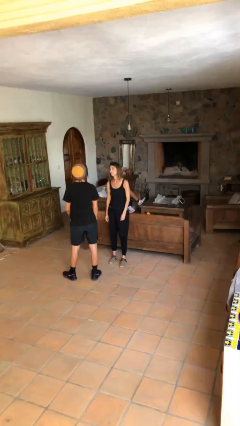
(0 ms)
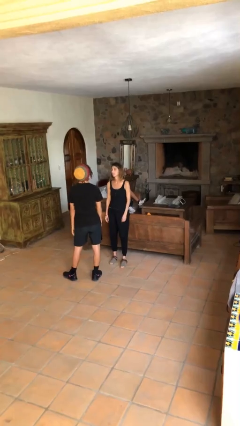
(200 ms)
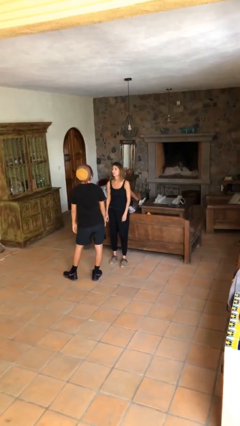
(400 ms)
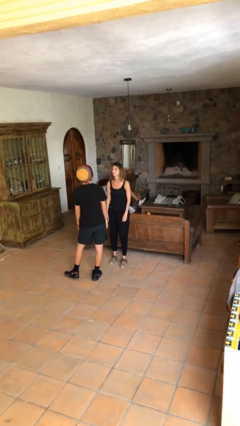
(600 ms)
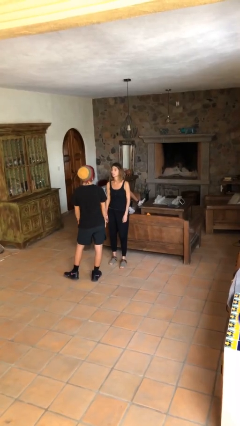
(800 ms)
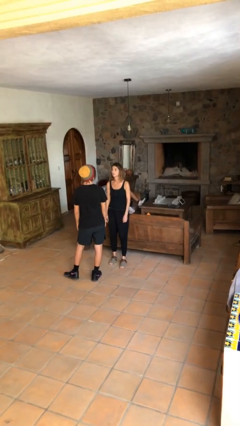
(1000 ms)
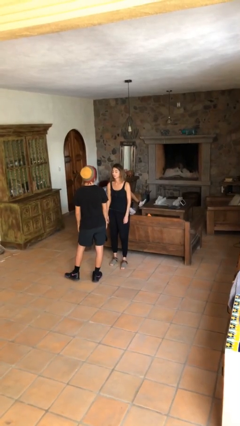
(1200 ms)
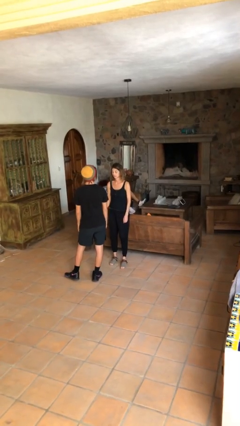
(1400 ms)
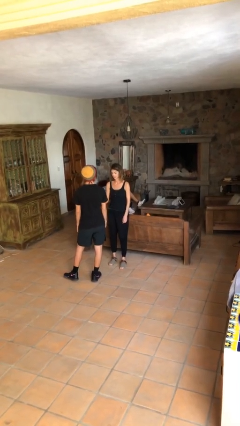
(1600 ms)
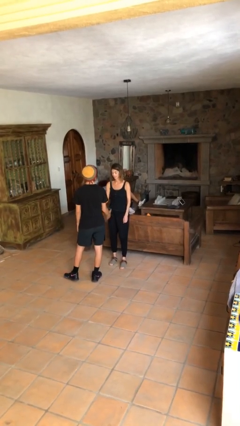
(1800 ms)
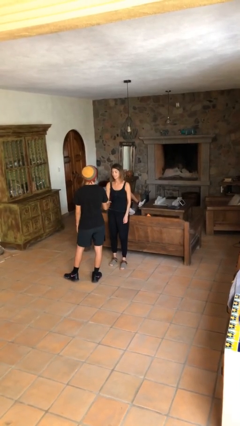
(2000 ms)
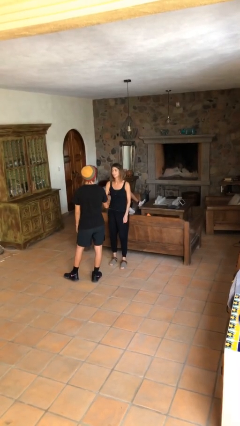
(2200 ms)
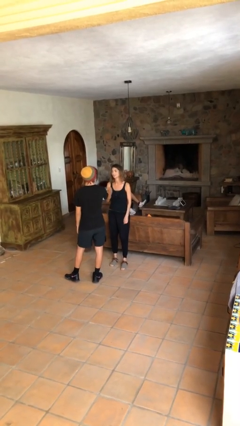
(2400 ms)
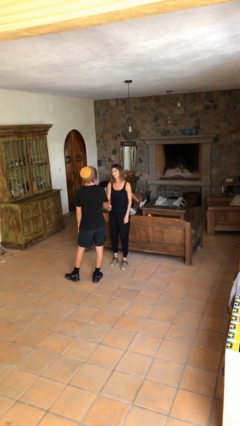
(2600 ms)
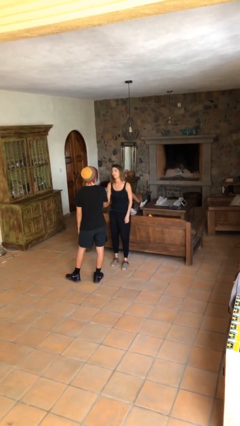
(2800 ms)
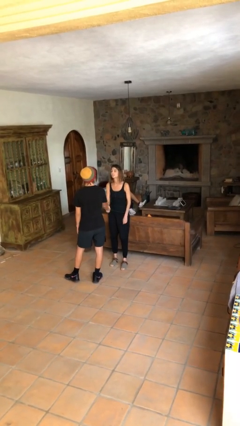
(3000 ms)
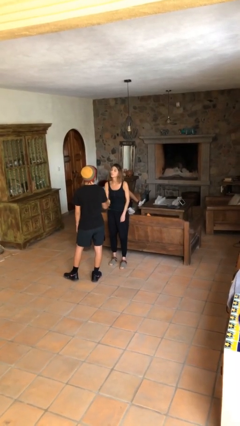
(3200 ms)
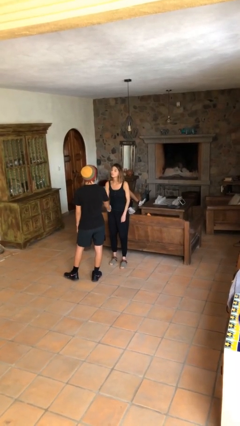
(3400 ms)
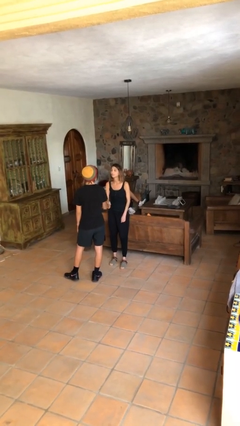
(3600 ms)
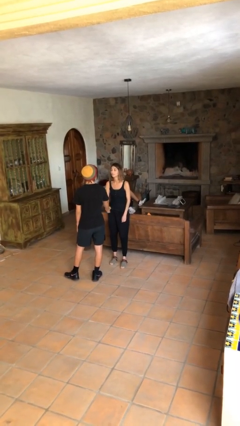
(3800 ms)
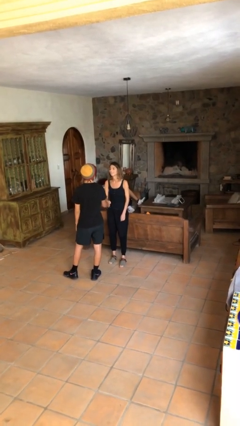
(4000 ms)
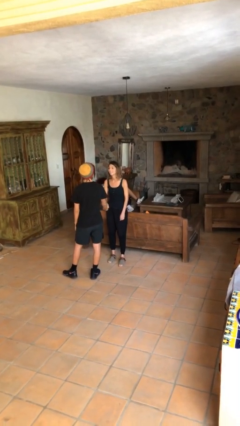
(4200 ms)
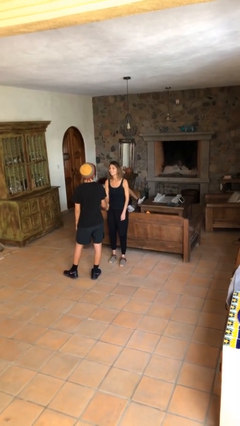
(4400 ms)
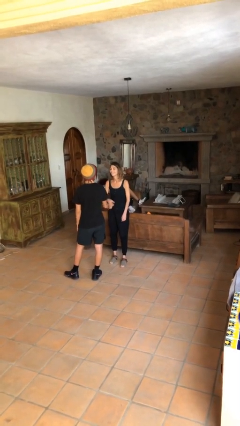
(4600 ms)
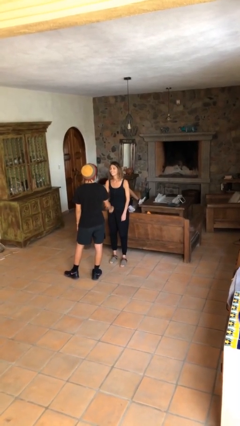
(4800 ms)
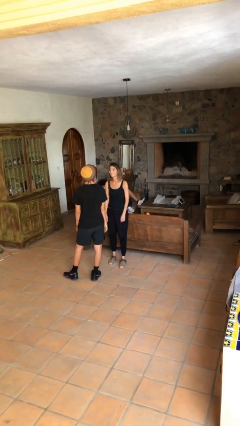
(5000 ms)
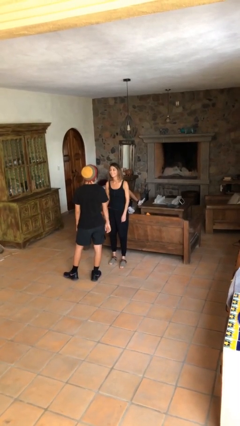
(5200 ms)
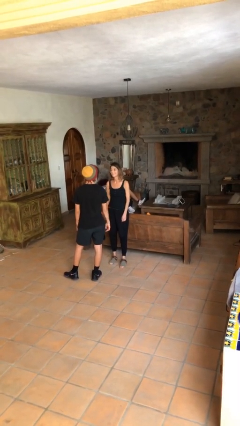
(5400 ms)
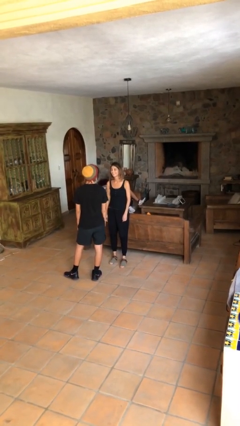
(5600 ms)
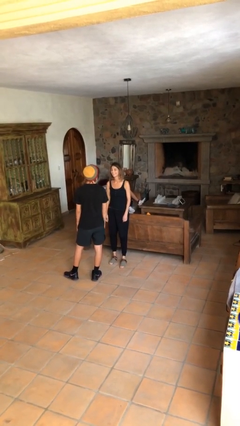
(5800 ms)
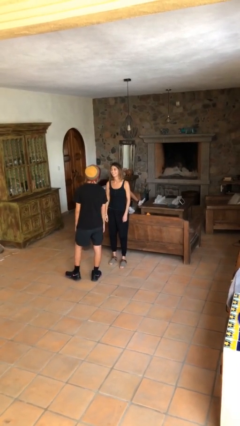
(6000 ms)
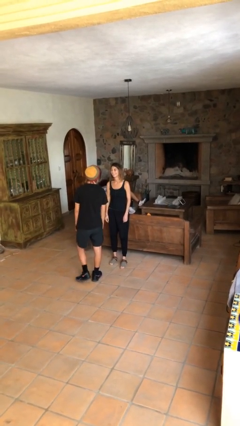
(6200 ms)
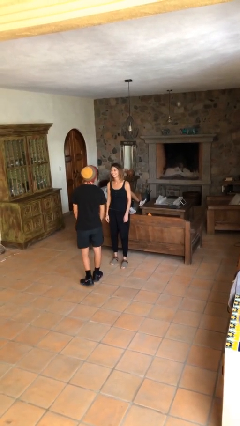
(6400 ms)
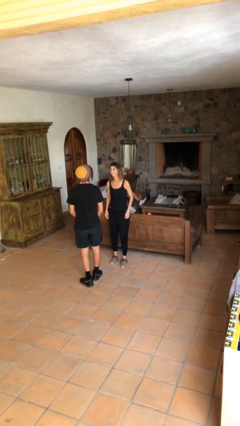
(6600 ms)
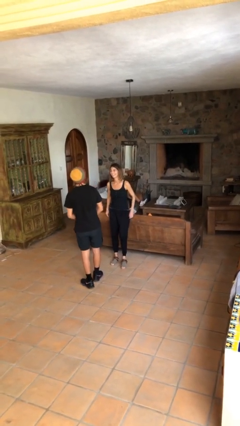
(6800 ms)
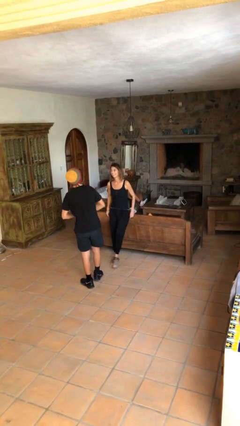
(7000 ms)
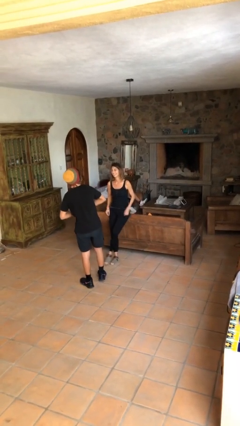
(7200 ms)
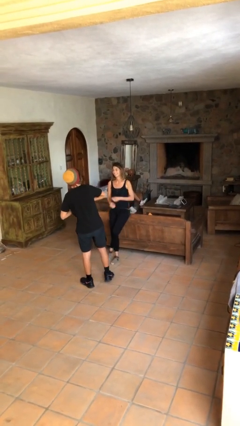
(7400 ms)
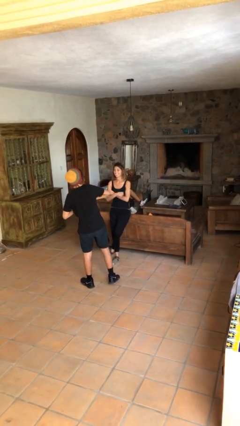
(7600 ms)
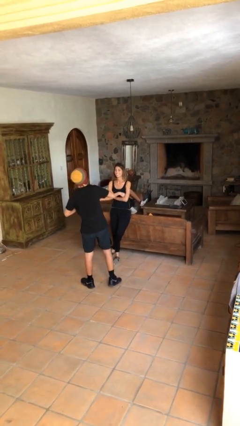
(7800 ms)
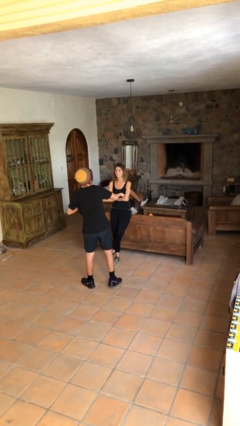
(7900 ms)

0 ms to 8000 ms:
person shakes hand

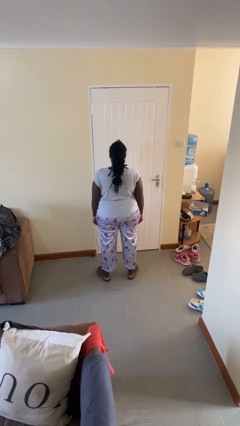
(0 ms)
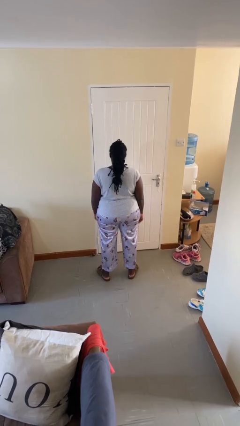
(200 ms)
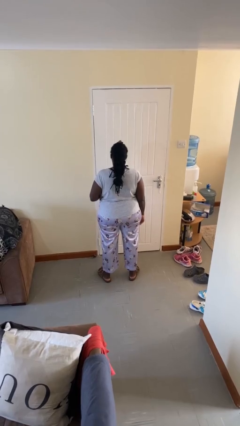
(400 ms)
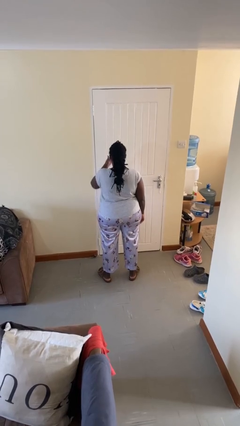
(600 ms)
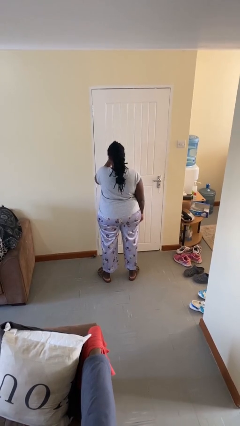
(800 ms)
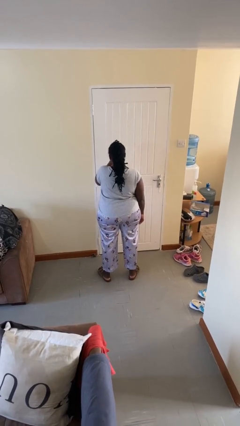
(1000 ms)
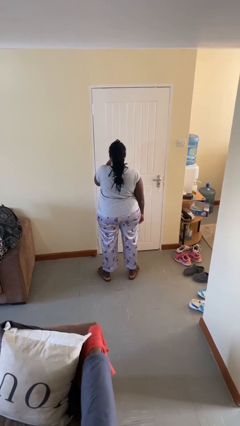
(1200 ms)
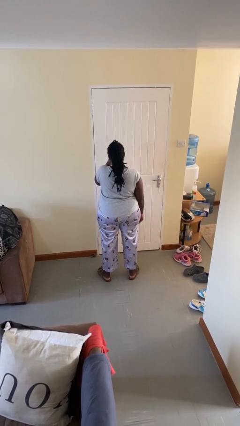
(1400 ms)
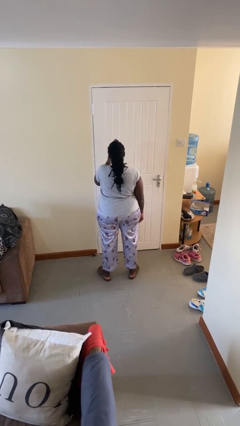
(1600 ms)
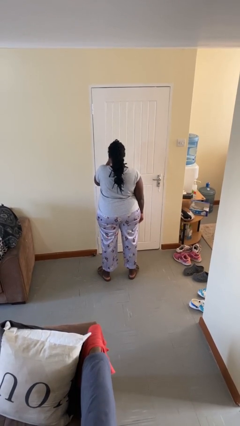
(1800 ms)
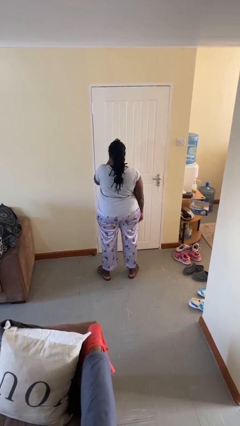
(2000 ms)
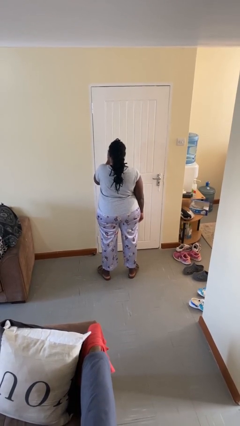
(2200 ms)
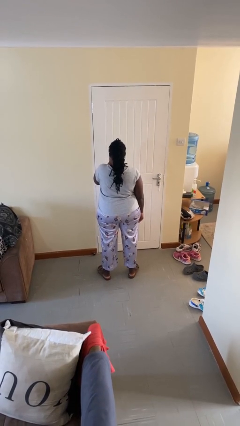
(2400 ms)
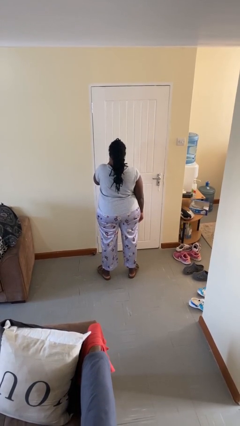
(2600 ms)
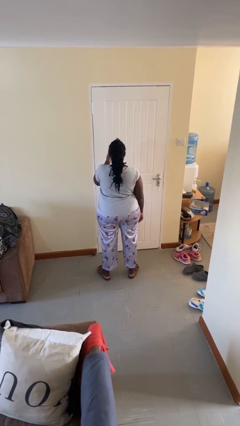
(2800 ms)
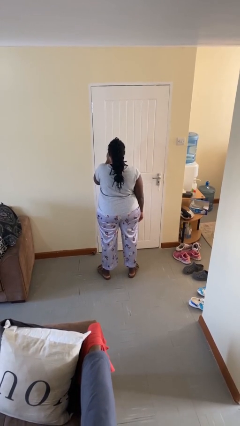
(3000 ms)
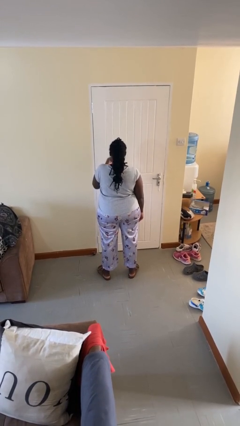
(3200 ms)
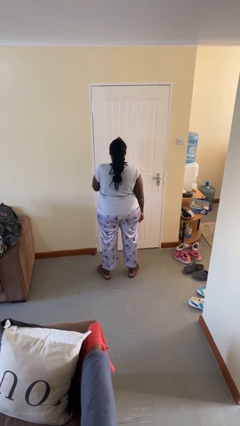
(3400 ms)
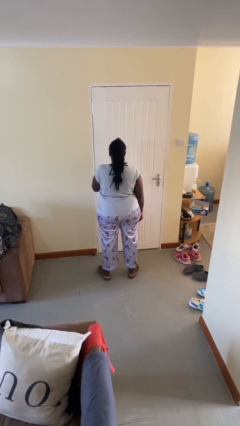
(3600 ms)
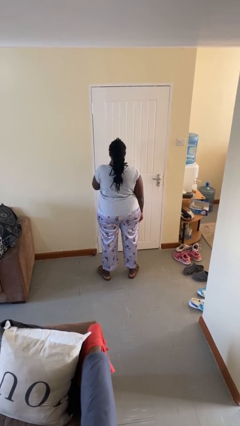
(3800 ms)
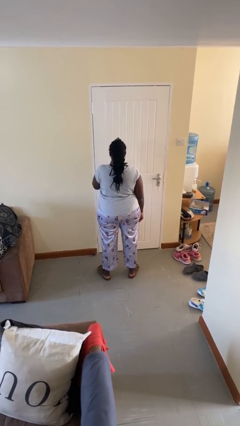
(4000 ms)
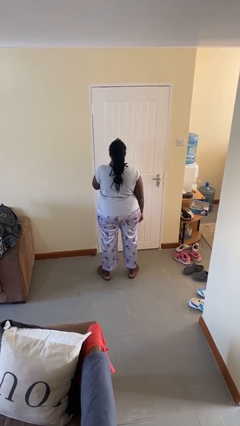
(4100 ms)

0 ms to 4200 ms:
person scratches face

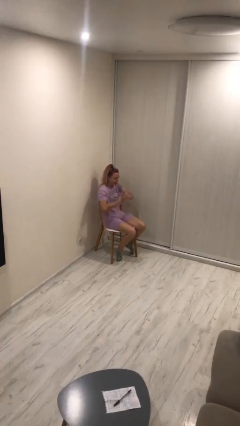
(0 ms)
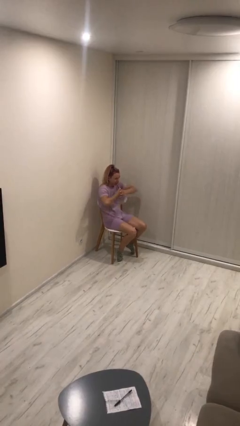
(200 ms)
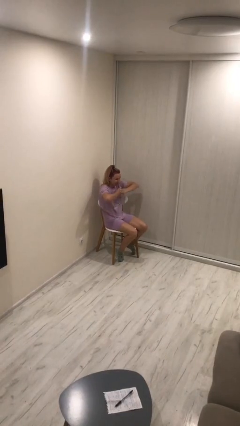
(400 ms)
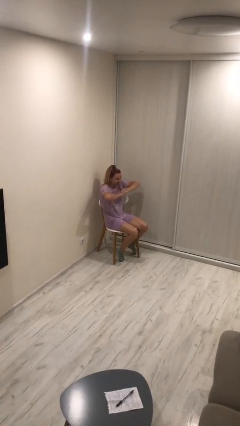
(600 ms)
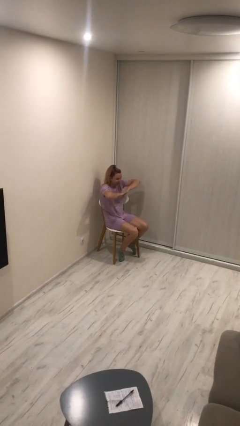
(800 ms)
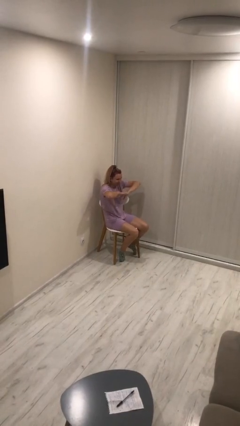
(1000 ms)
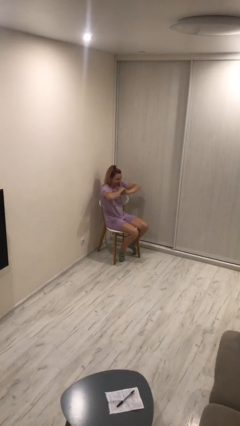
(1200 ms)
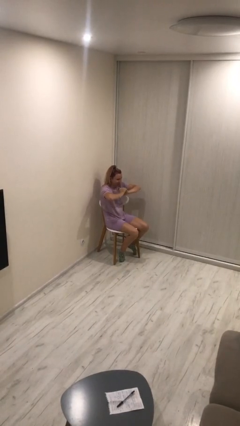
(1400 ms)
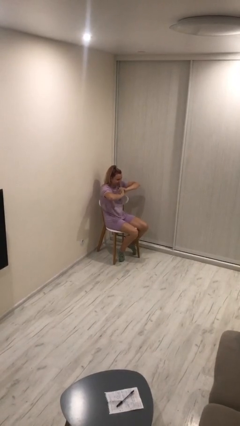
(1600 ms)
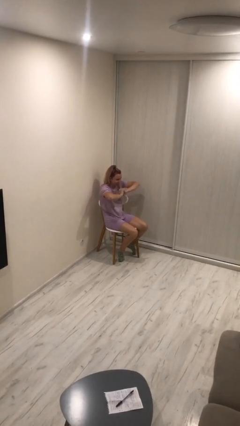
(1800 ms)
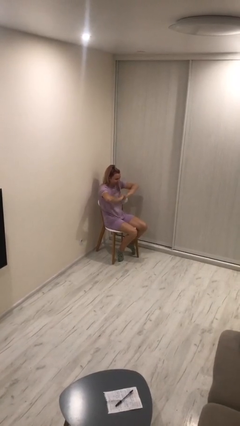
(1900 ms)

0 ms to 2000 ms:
person cracks knuckles

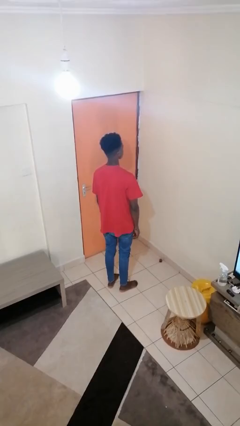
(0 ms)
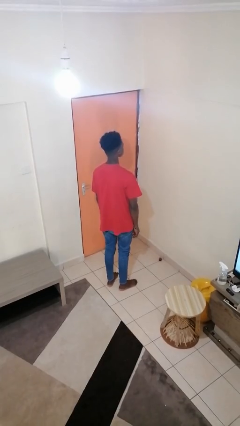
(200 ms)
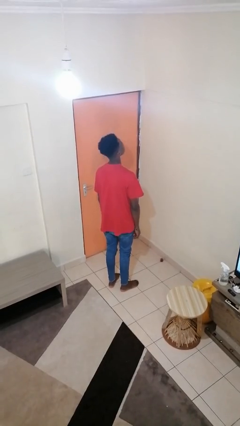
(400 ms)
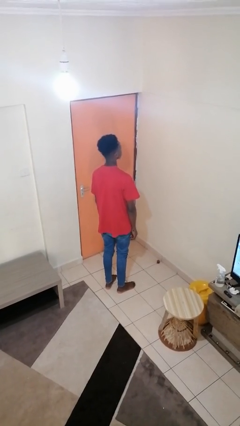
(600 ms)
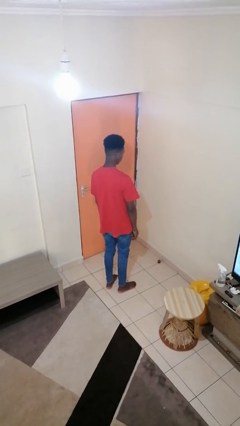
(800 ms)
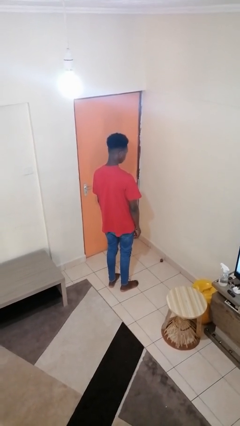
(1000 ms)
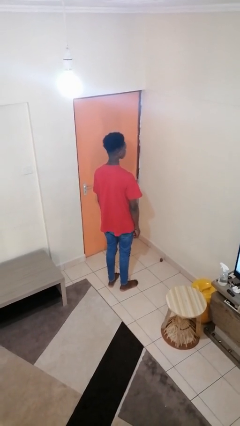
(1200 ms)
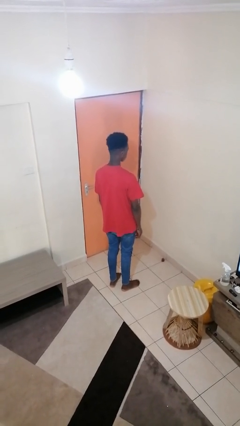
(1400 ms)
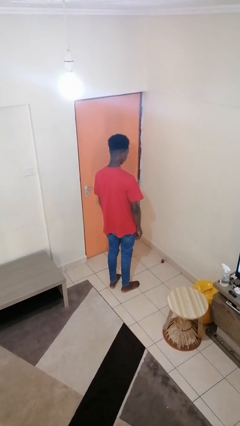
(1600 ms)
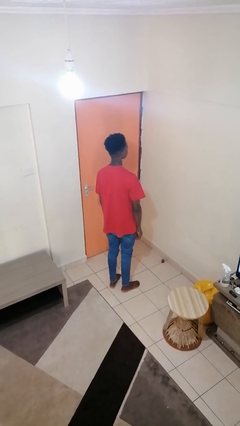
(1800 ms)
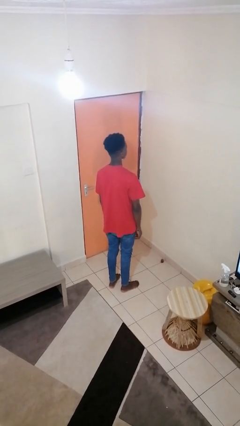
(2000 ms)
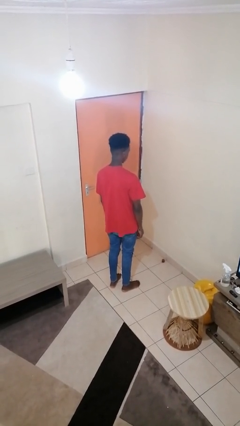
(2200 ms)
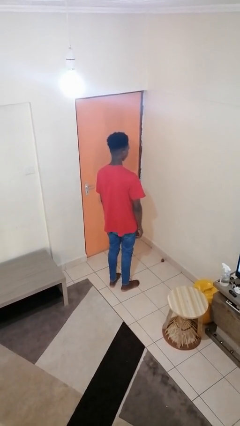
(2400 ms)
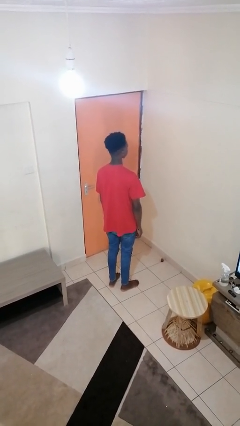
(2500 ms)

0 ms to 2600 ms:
person nods head

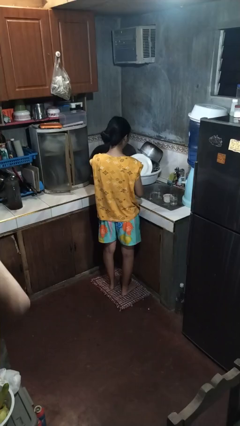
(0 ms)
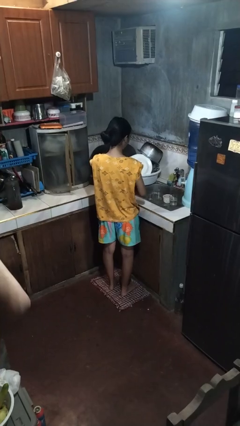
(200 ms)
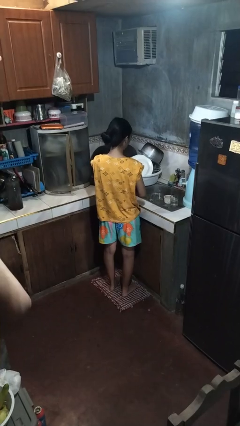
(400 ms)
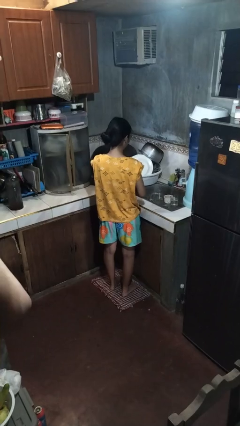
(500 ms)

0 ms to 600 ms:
person turns off faucet
